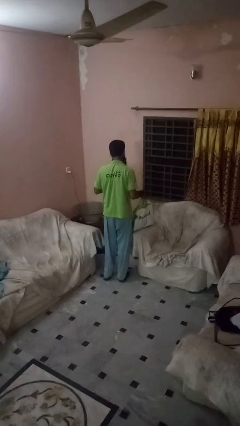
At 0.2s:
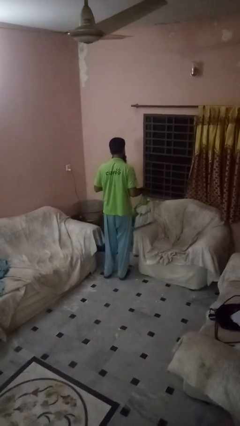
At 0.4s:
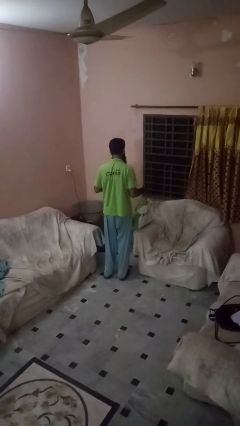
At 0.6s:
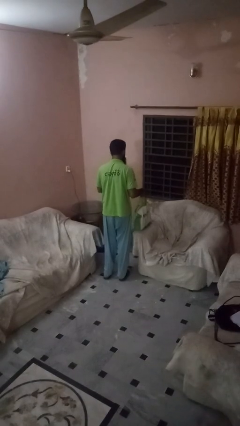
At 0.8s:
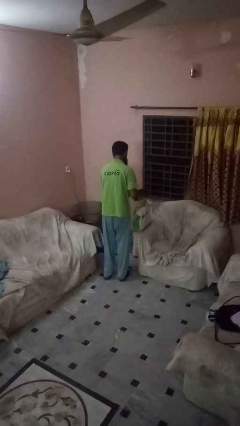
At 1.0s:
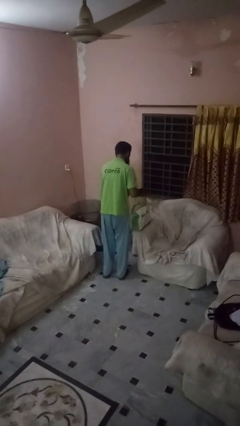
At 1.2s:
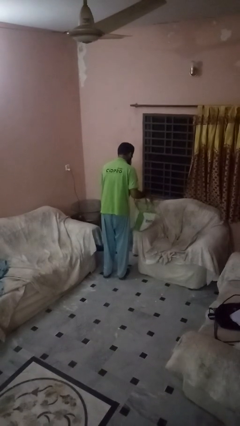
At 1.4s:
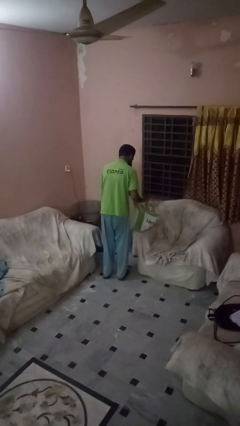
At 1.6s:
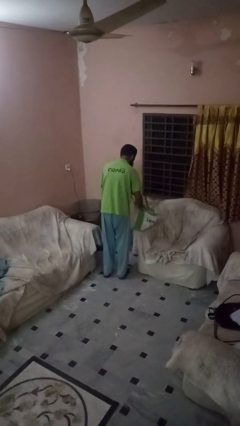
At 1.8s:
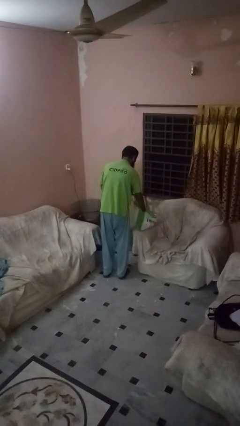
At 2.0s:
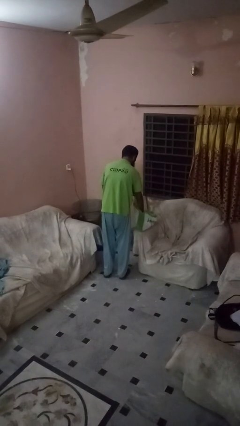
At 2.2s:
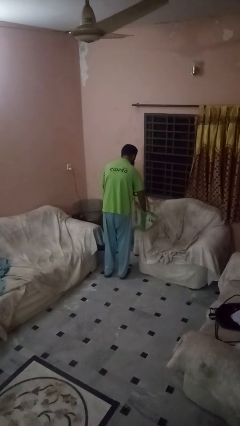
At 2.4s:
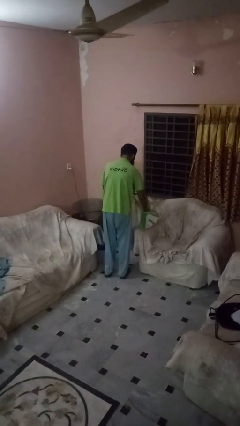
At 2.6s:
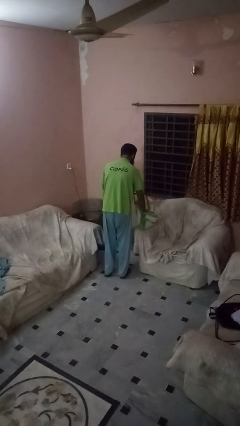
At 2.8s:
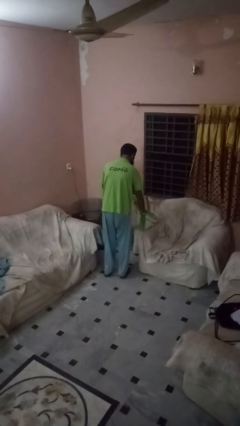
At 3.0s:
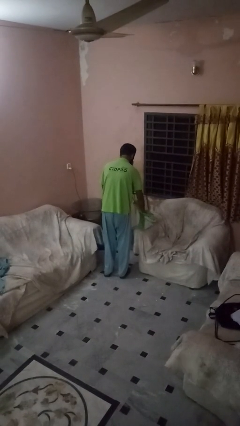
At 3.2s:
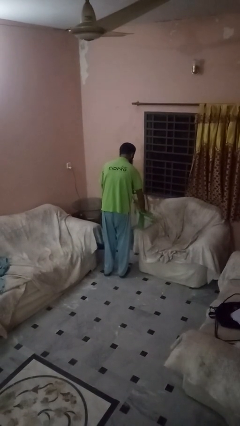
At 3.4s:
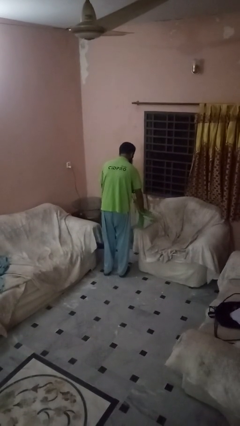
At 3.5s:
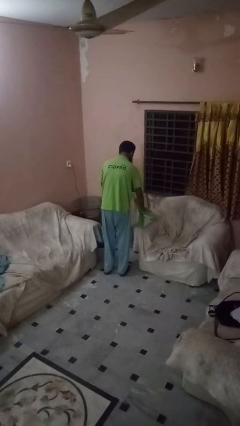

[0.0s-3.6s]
person searches in bag

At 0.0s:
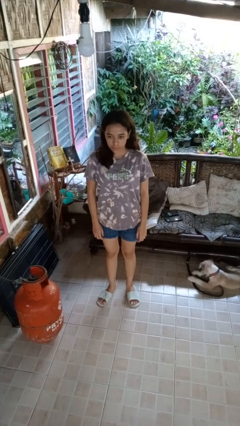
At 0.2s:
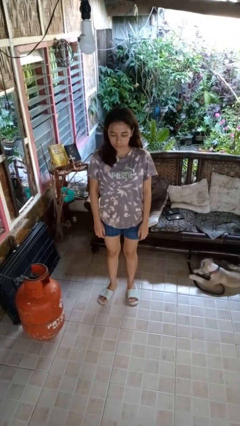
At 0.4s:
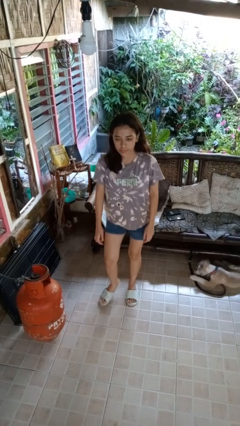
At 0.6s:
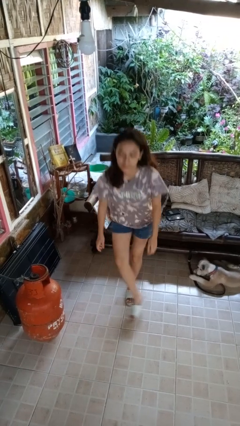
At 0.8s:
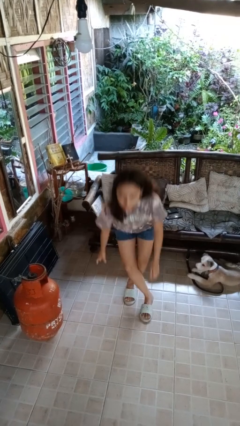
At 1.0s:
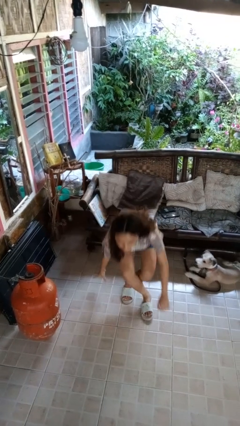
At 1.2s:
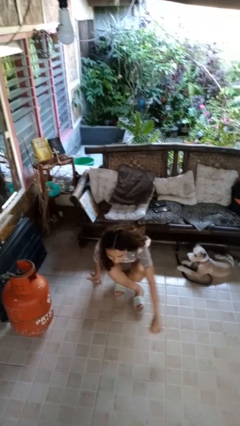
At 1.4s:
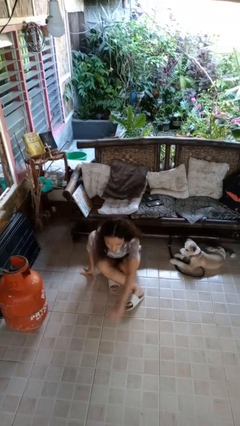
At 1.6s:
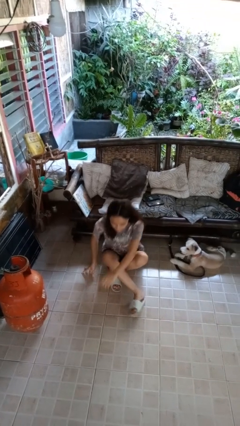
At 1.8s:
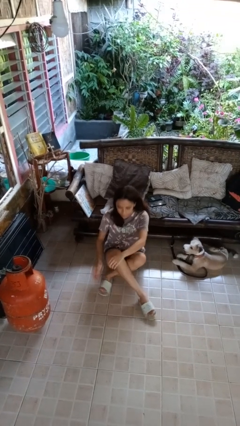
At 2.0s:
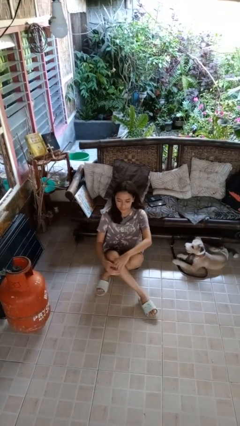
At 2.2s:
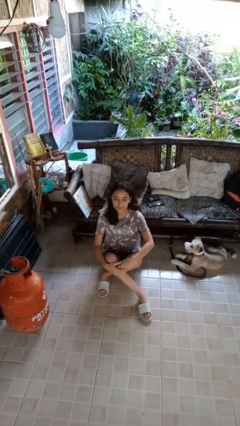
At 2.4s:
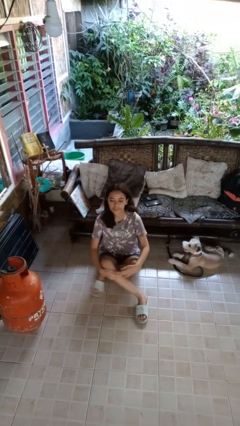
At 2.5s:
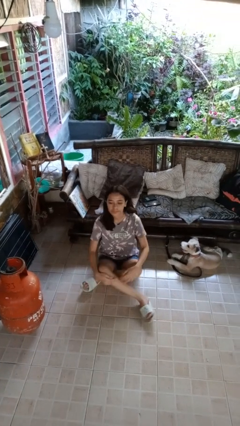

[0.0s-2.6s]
person sits crisscross

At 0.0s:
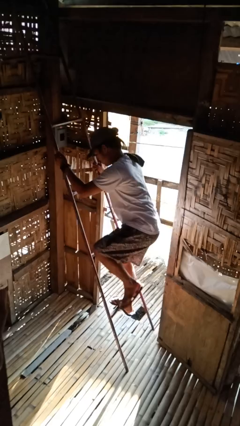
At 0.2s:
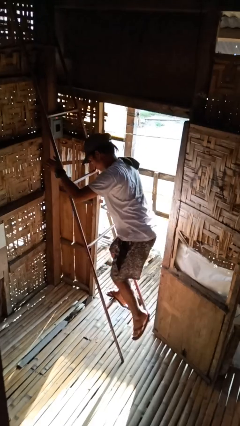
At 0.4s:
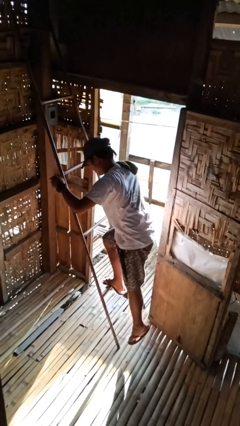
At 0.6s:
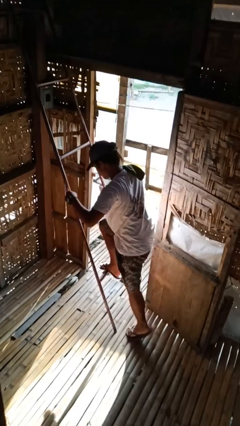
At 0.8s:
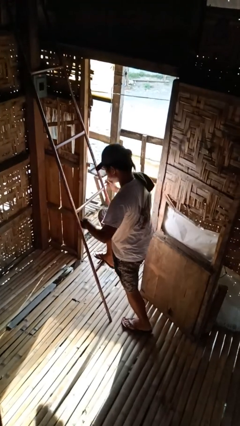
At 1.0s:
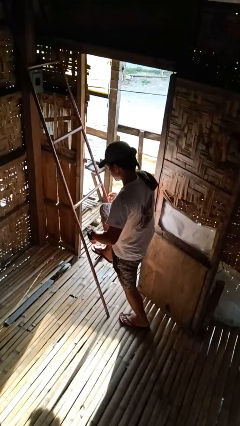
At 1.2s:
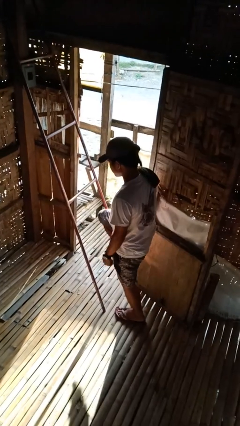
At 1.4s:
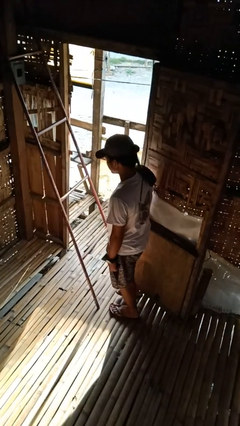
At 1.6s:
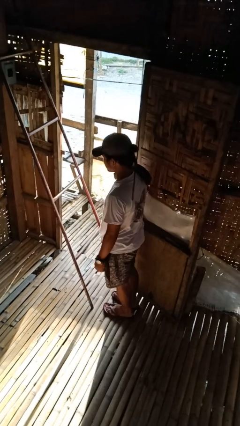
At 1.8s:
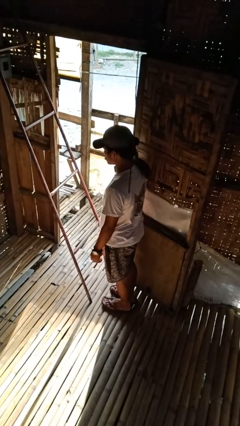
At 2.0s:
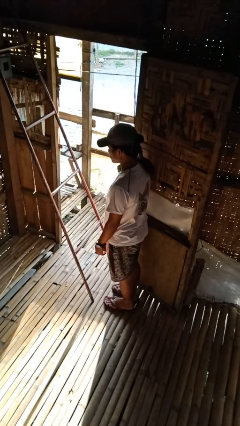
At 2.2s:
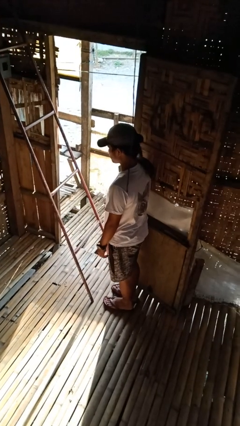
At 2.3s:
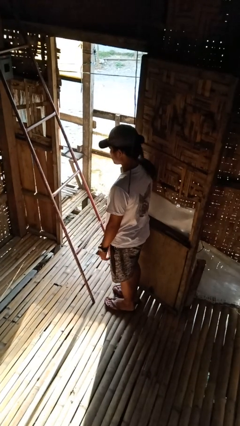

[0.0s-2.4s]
person climbs down ladder

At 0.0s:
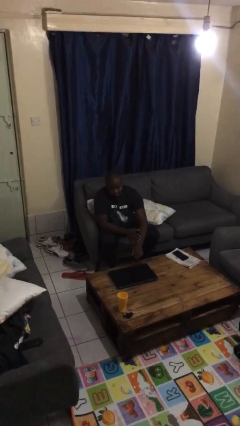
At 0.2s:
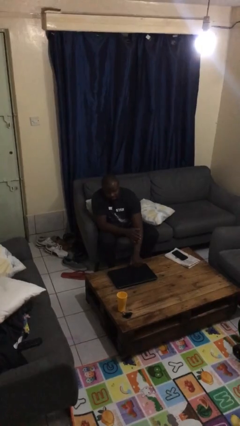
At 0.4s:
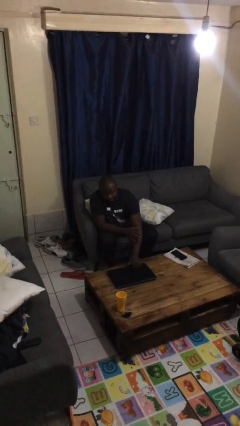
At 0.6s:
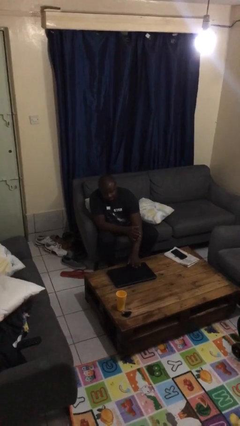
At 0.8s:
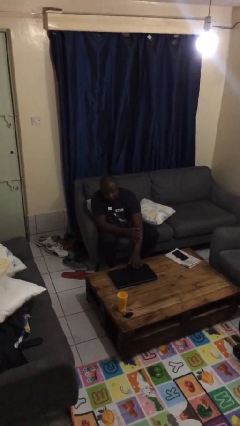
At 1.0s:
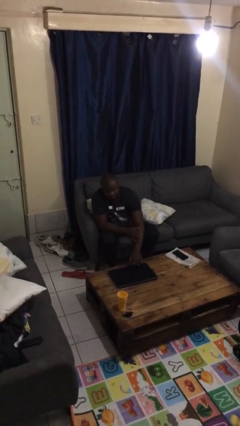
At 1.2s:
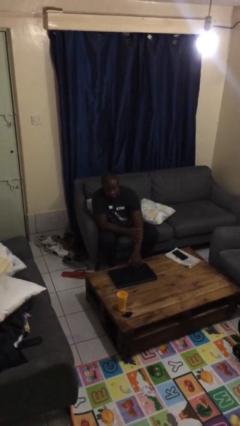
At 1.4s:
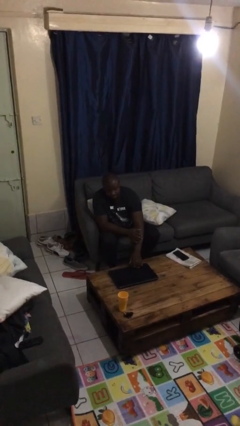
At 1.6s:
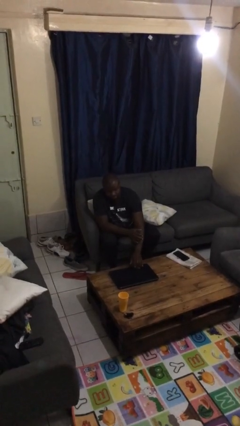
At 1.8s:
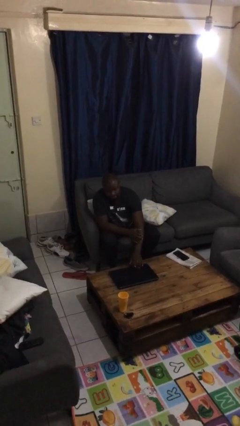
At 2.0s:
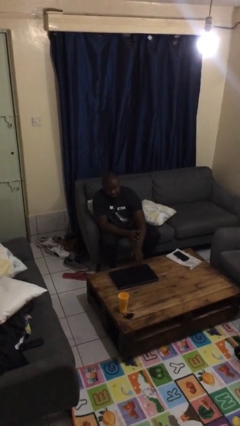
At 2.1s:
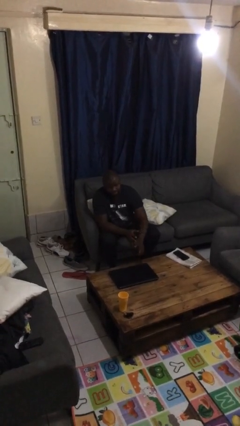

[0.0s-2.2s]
person taps object with finger

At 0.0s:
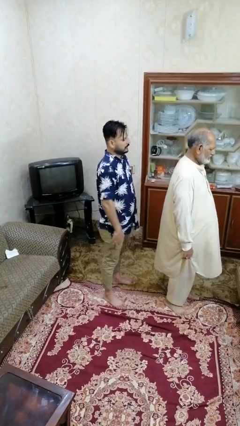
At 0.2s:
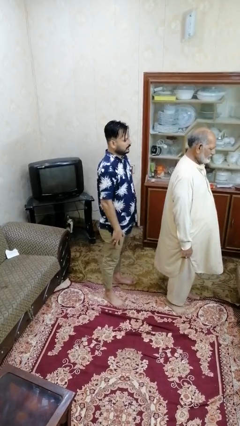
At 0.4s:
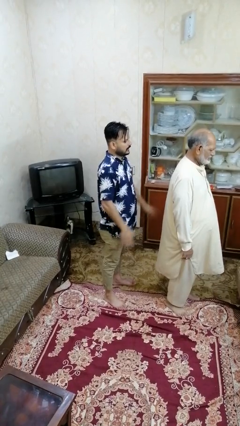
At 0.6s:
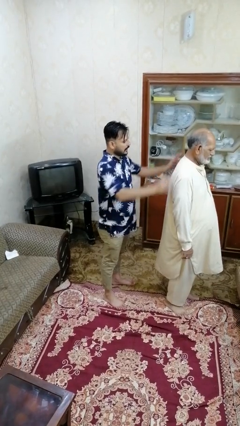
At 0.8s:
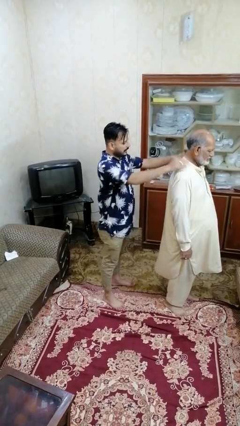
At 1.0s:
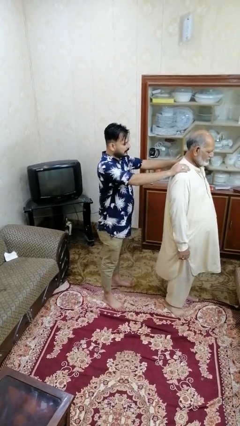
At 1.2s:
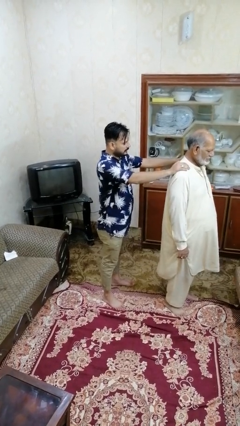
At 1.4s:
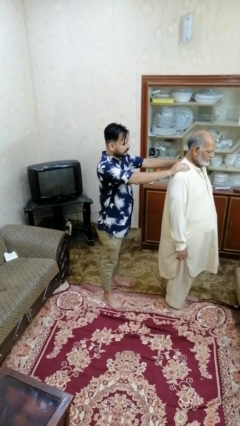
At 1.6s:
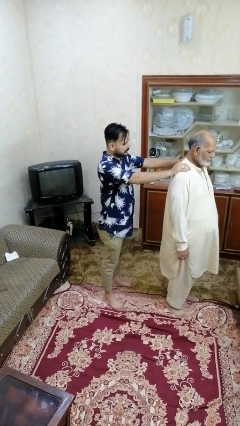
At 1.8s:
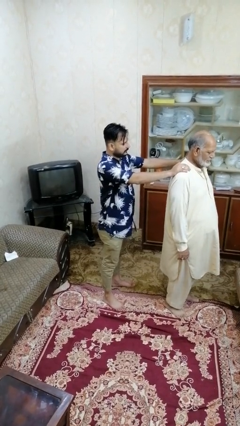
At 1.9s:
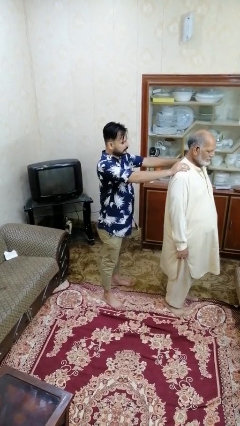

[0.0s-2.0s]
person grabs person by shoulder

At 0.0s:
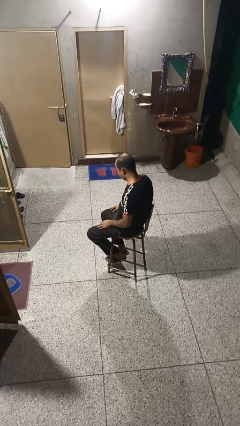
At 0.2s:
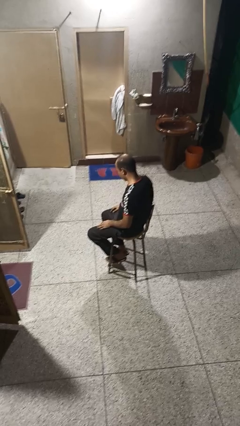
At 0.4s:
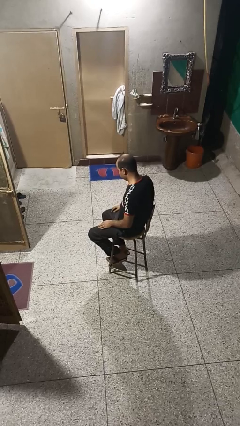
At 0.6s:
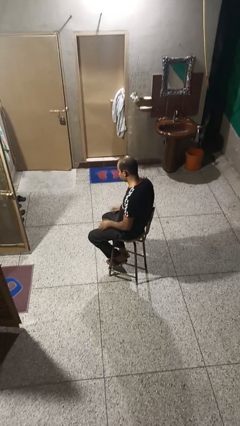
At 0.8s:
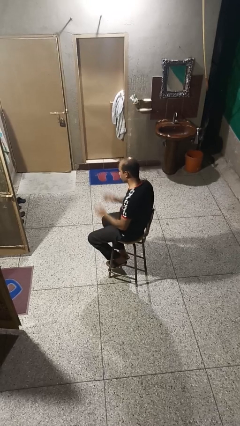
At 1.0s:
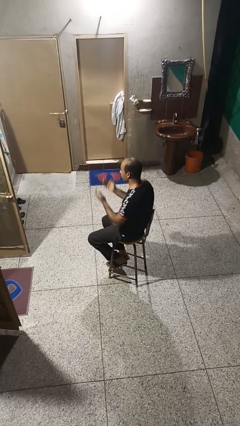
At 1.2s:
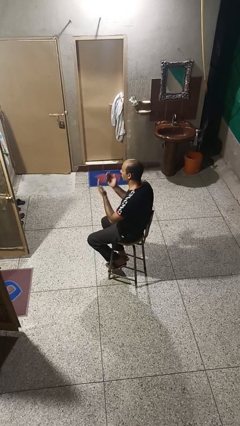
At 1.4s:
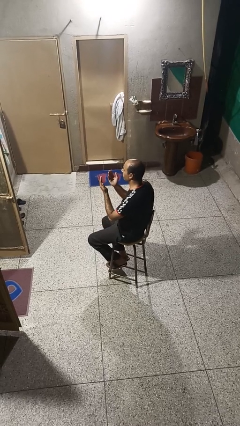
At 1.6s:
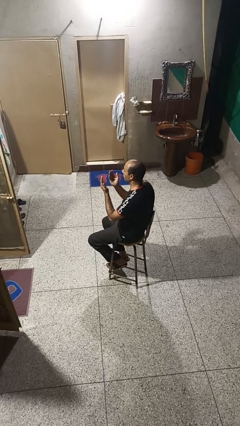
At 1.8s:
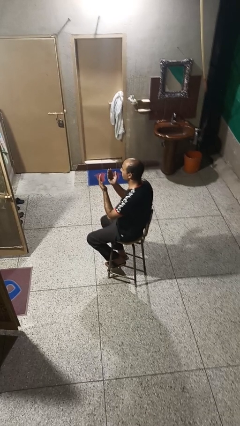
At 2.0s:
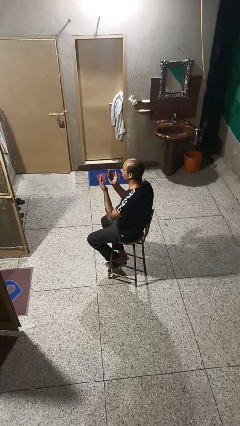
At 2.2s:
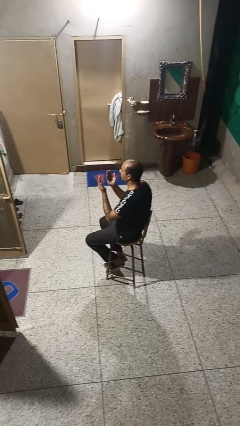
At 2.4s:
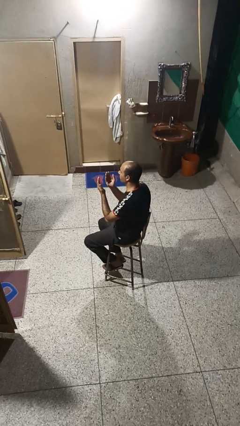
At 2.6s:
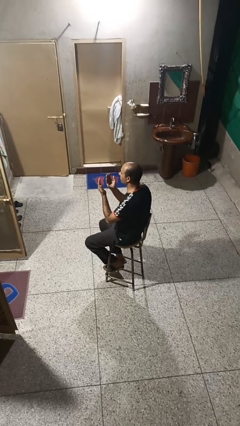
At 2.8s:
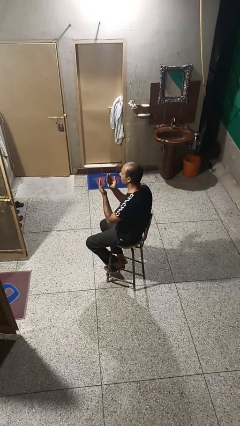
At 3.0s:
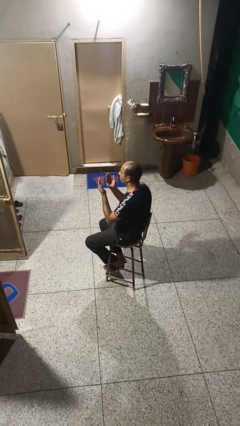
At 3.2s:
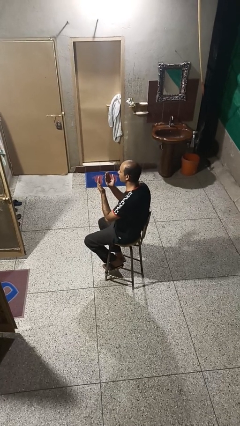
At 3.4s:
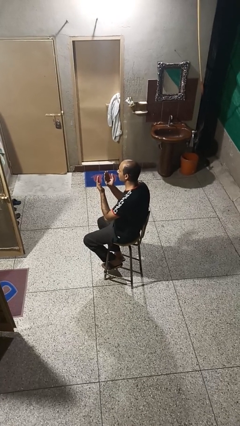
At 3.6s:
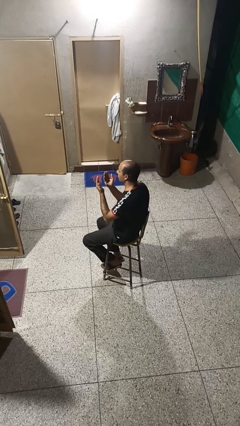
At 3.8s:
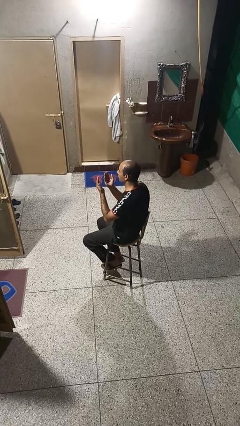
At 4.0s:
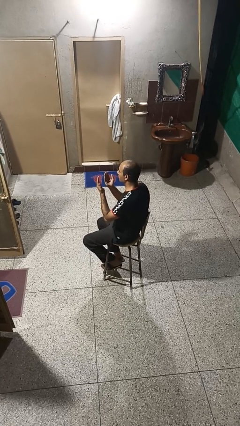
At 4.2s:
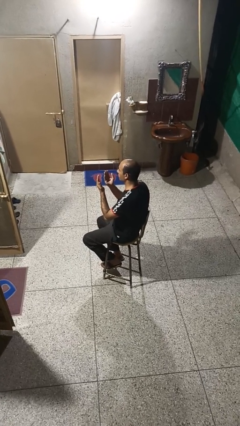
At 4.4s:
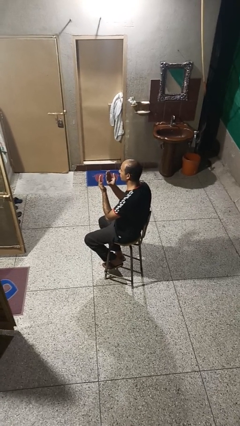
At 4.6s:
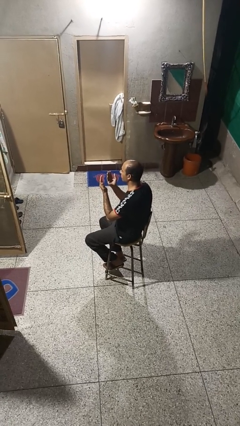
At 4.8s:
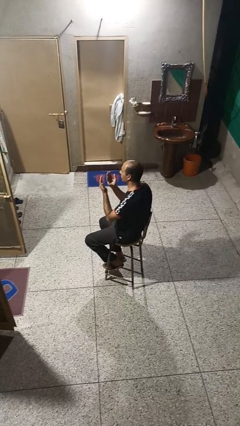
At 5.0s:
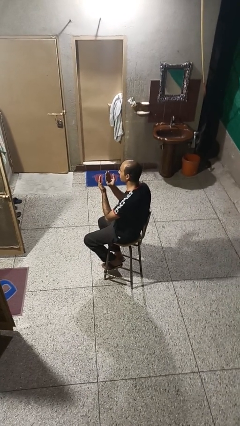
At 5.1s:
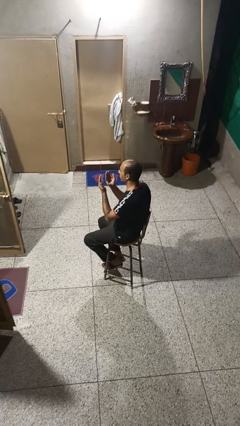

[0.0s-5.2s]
person prays
